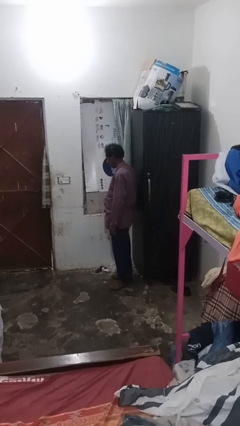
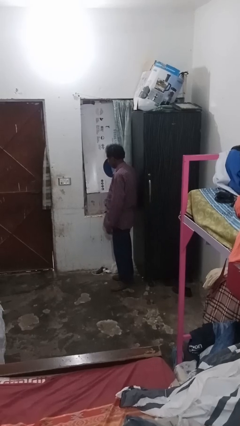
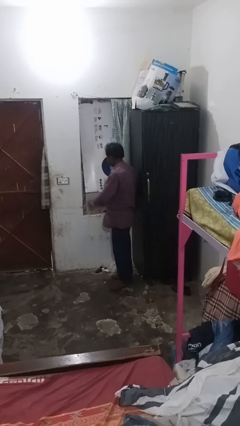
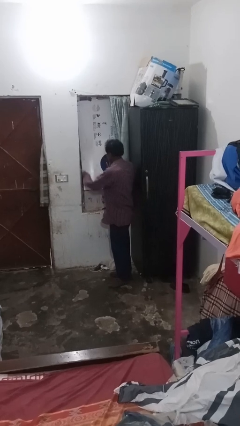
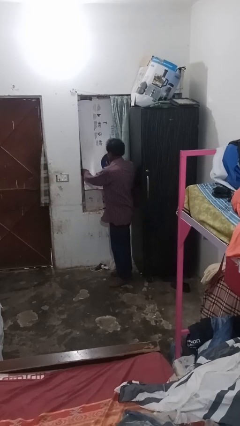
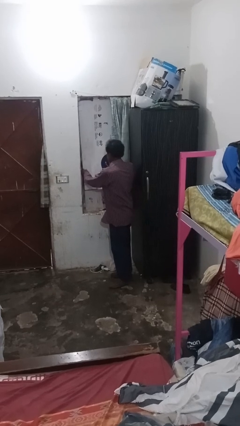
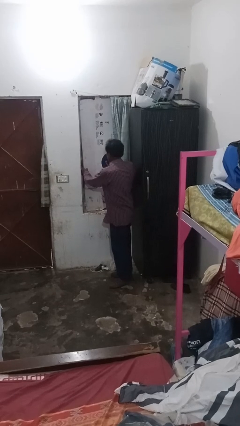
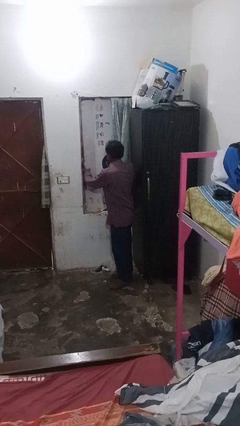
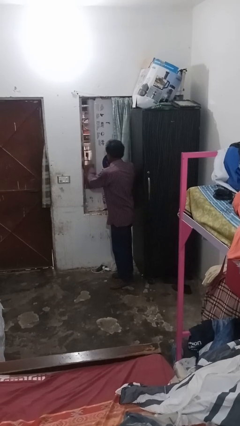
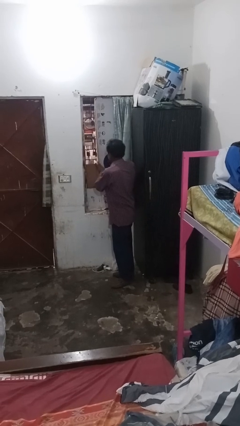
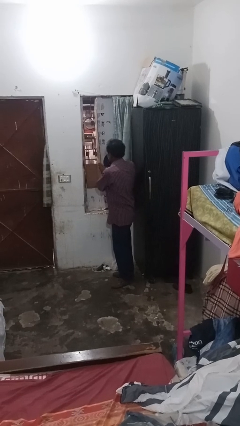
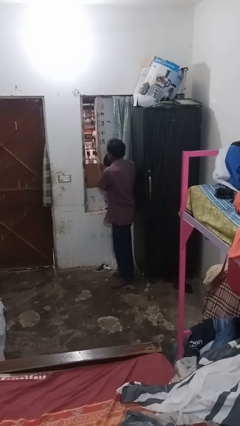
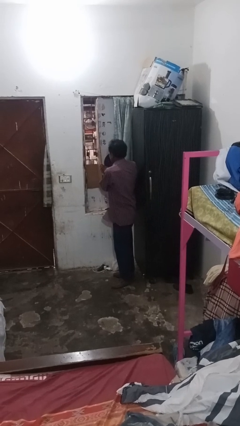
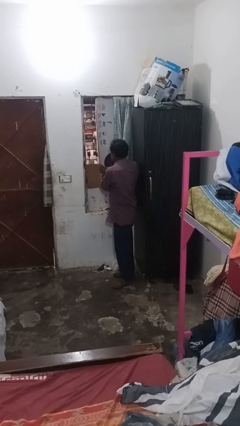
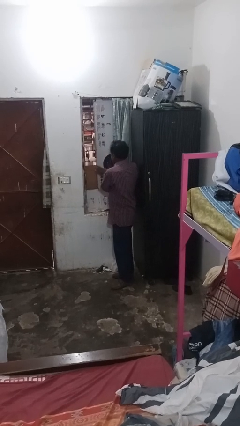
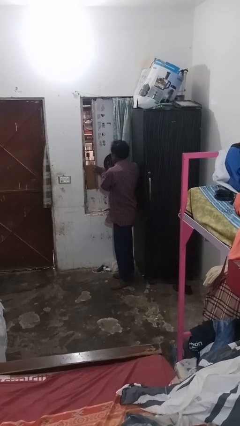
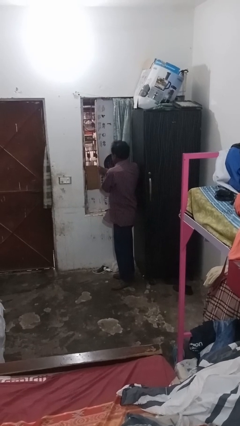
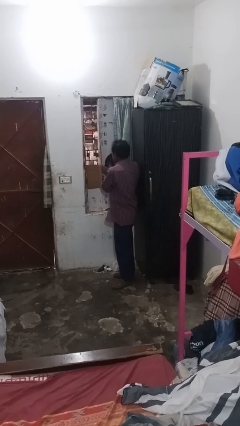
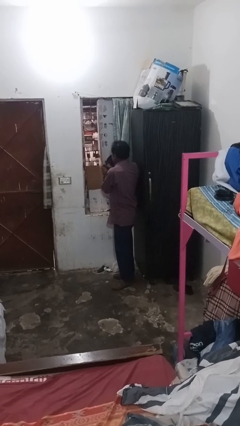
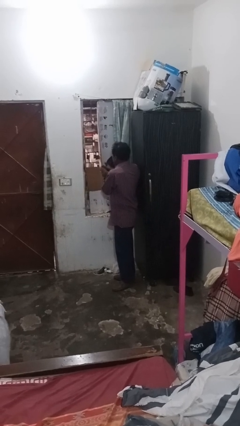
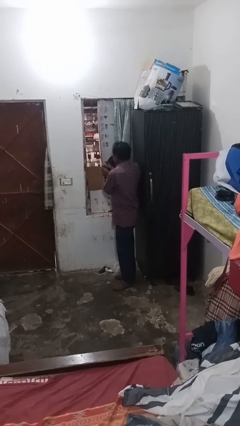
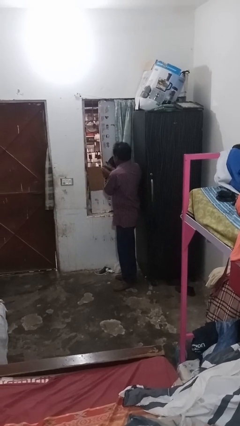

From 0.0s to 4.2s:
person opens home window

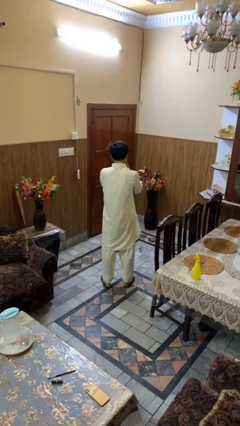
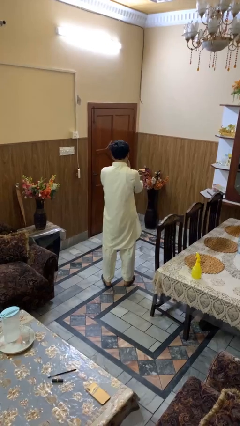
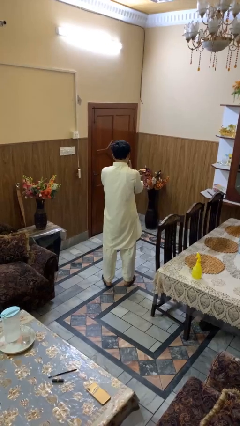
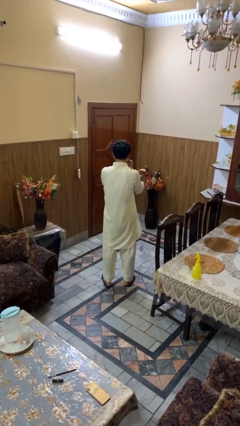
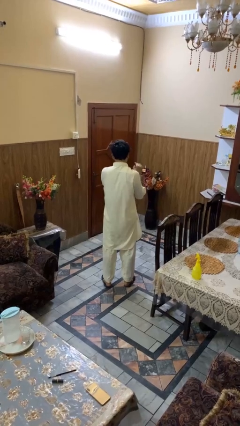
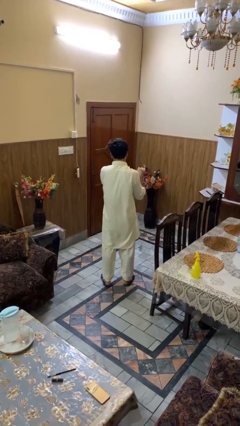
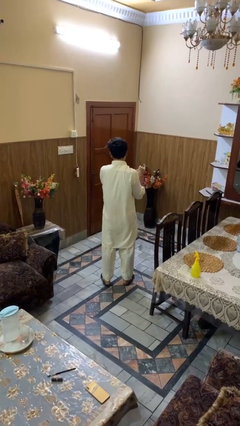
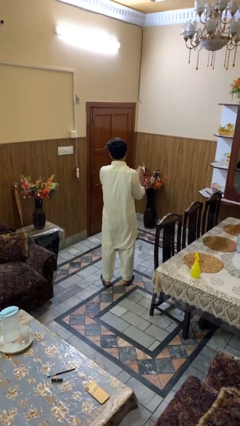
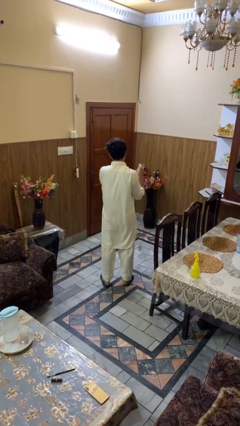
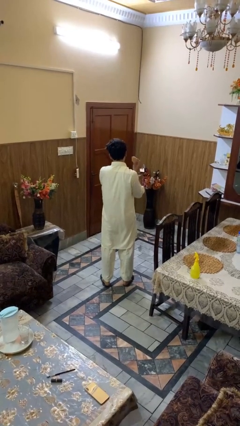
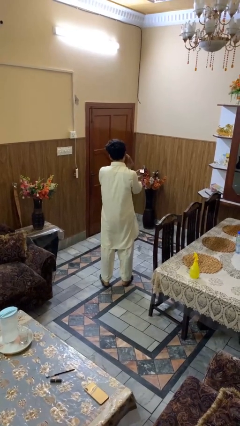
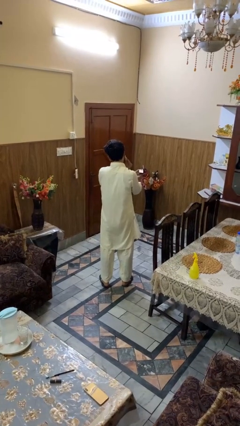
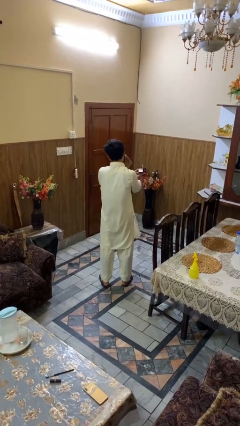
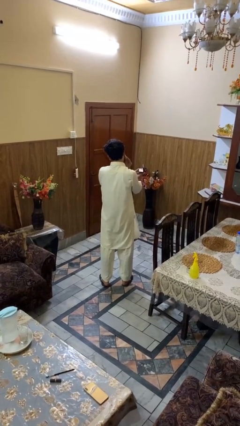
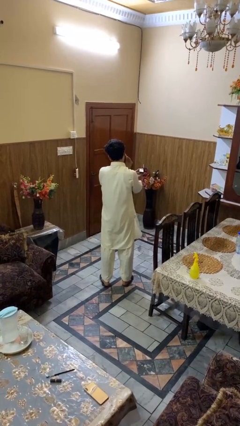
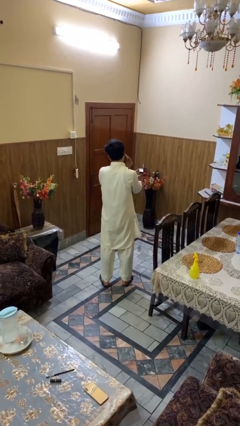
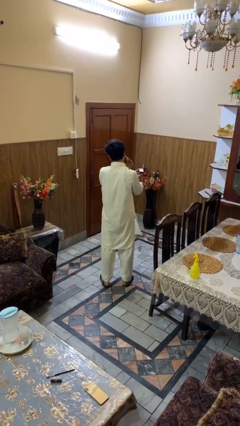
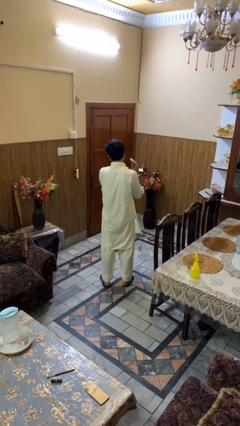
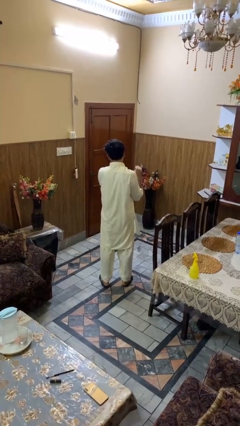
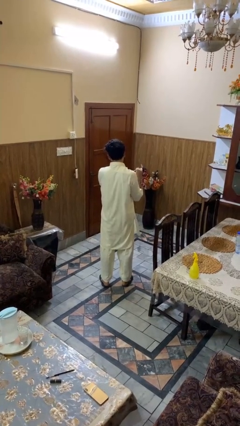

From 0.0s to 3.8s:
person applies foundation makeup

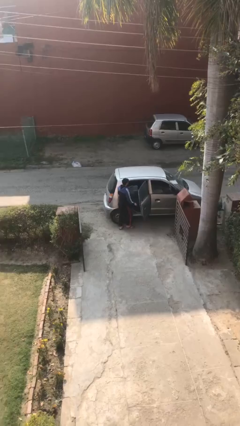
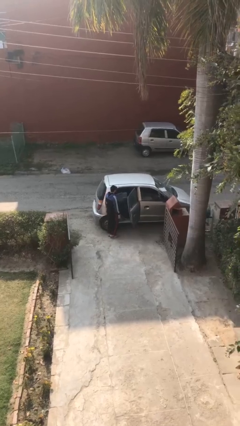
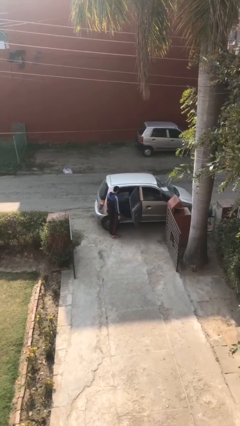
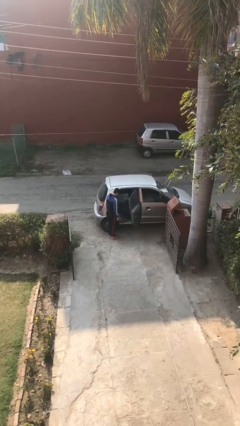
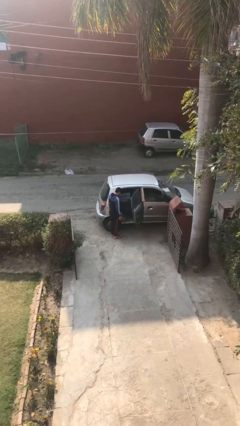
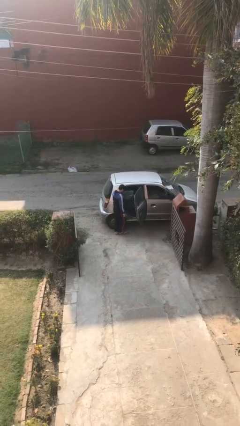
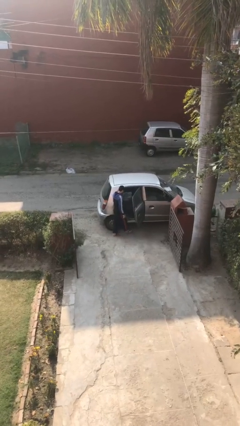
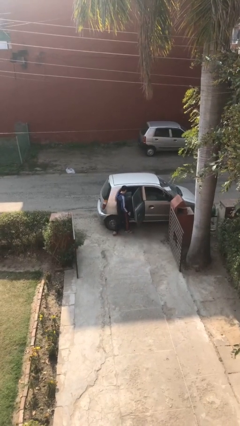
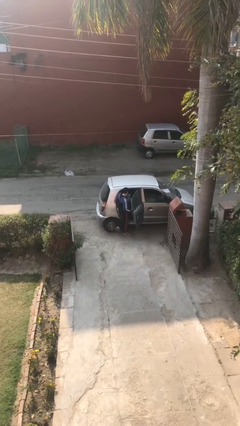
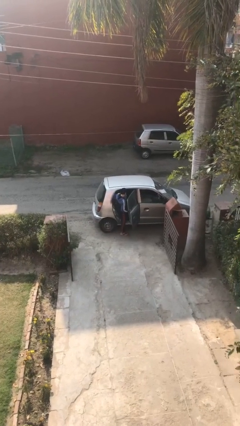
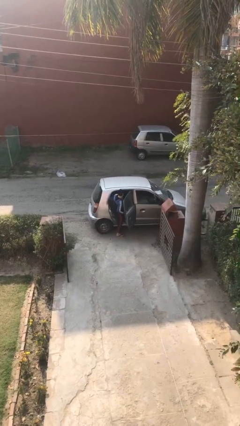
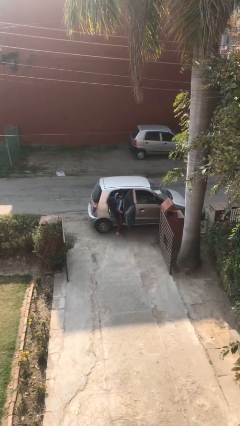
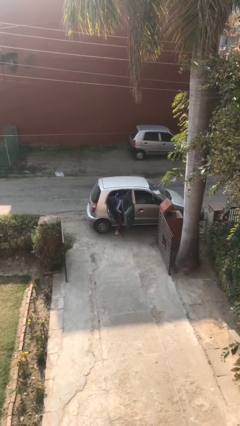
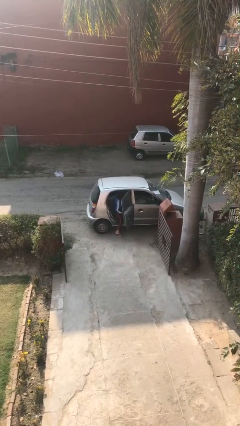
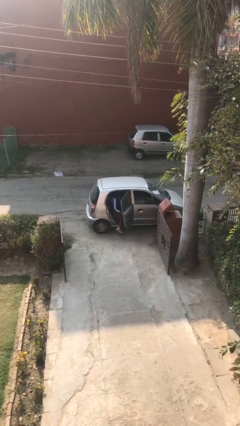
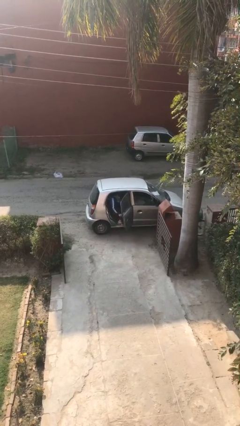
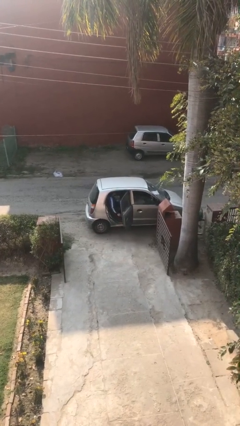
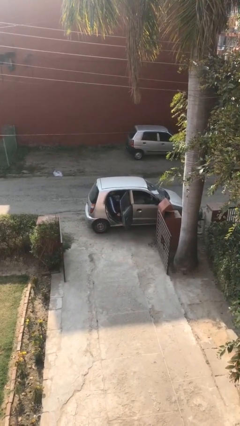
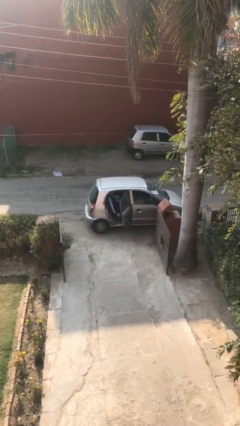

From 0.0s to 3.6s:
person enters car

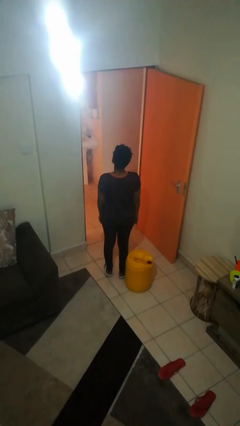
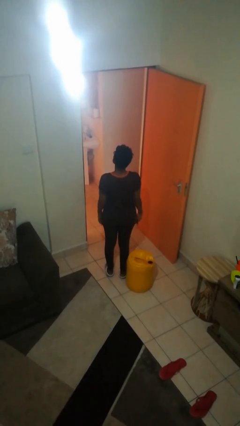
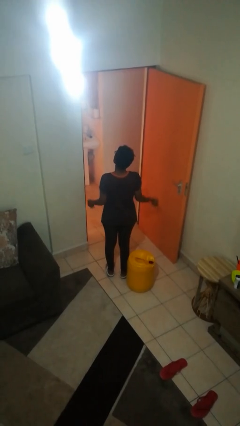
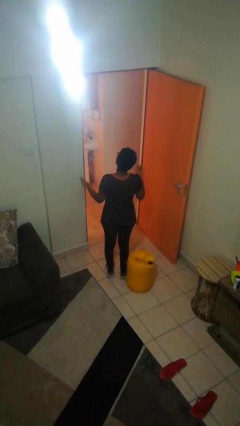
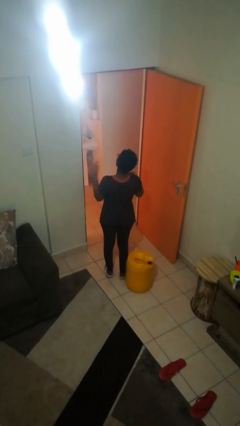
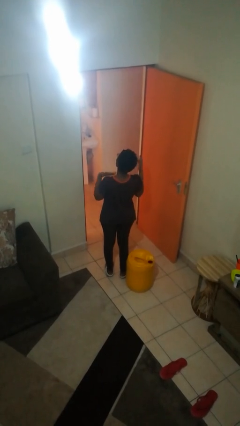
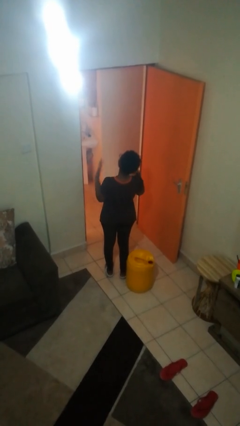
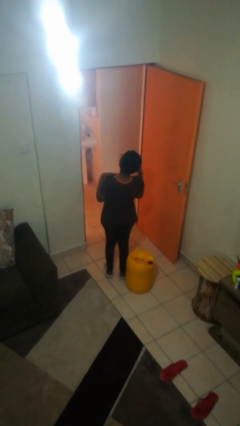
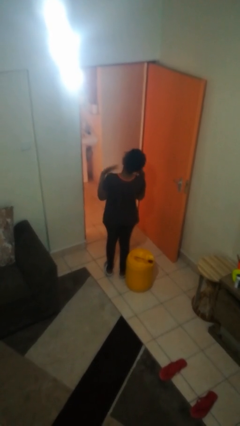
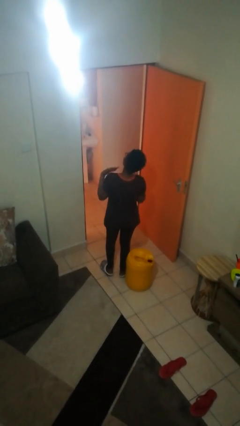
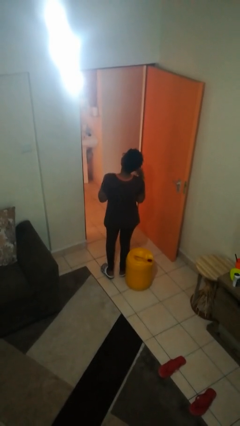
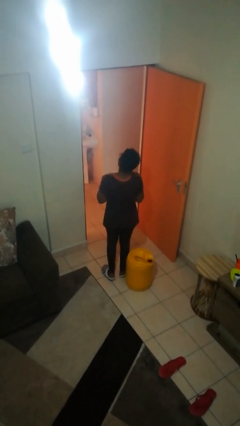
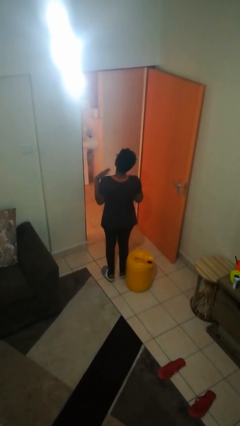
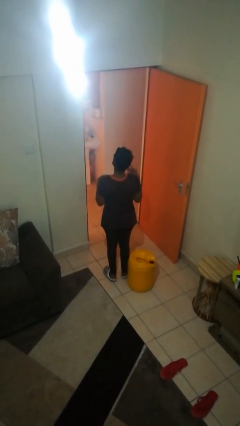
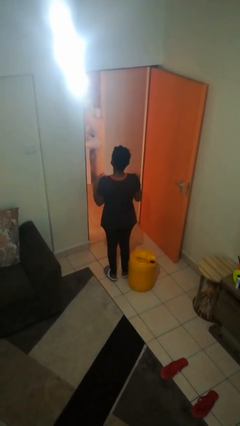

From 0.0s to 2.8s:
person drums on chest

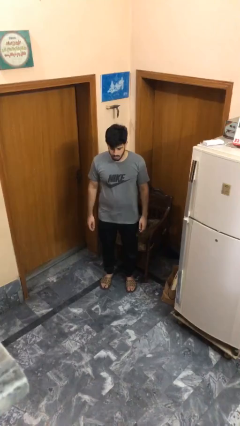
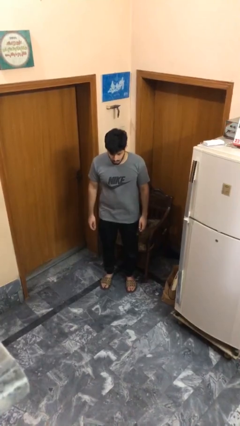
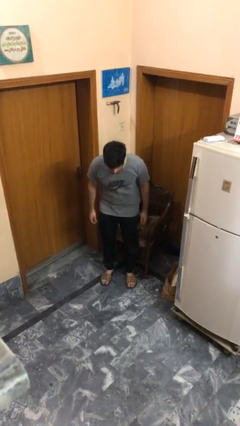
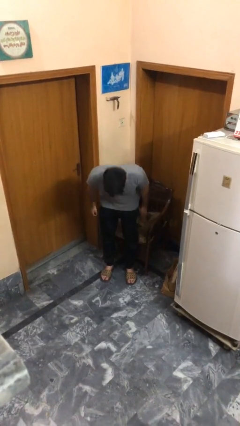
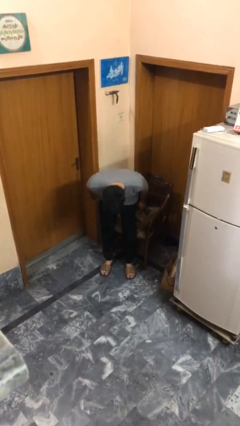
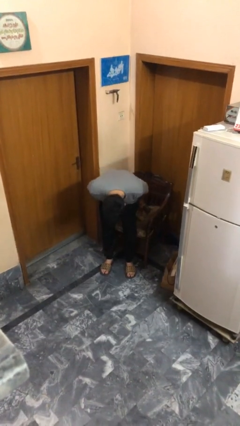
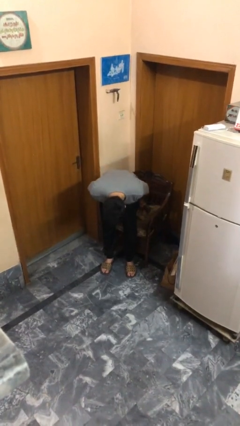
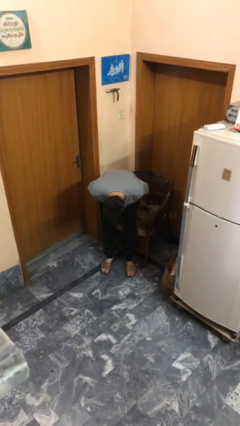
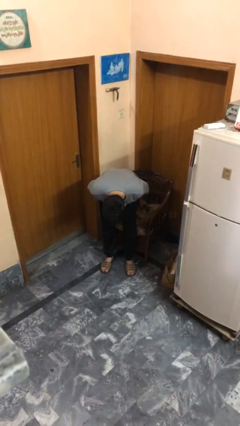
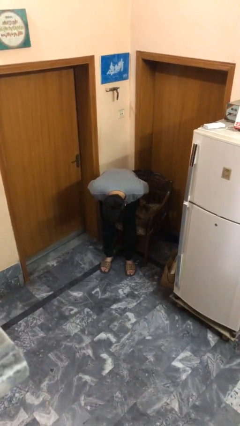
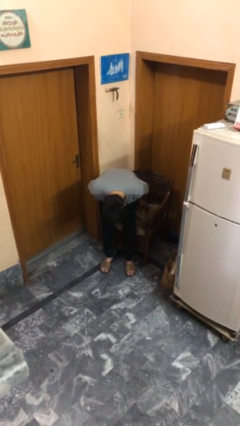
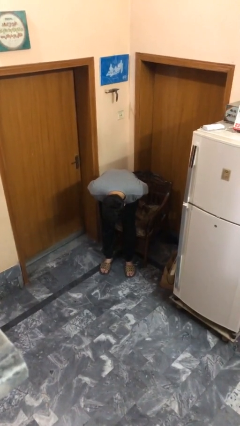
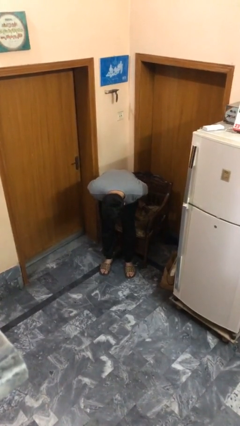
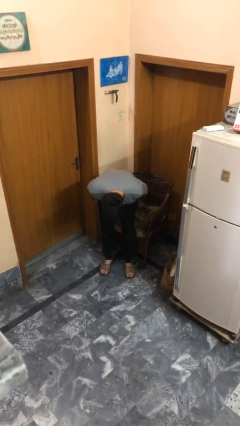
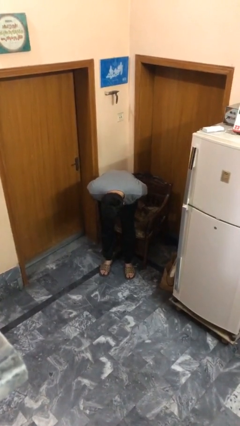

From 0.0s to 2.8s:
person bows

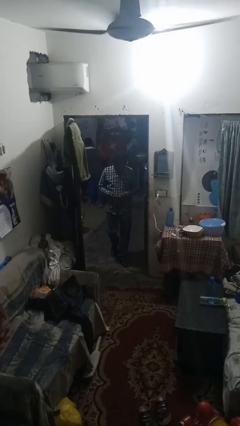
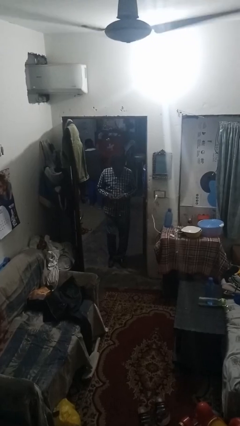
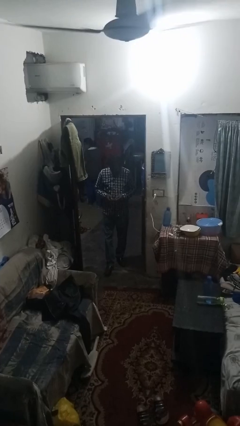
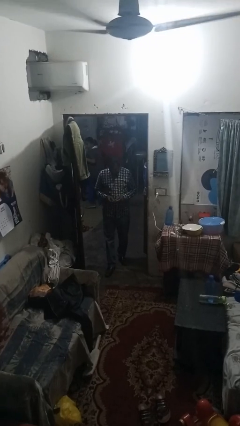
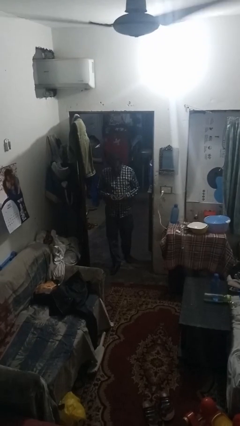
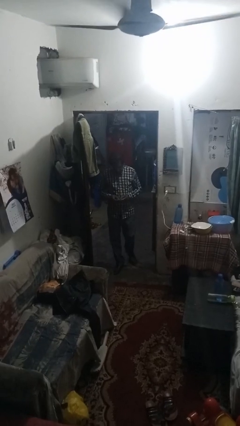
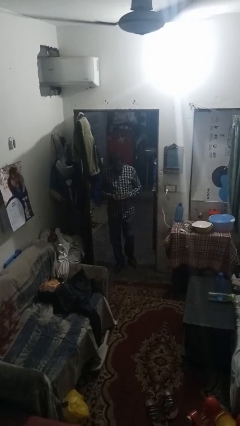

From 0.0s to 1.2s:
person enters scene through structure
